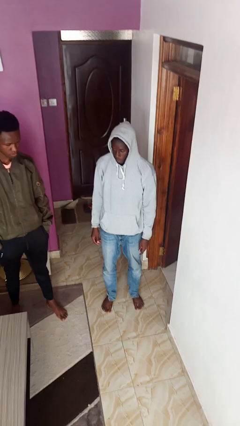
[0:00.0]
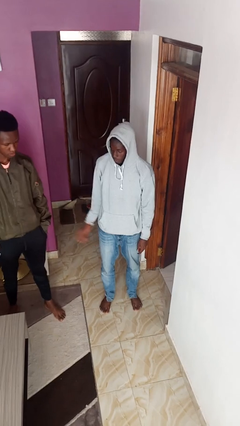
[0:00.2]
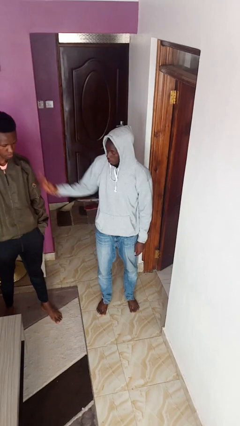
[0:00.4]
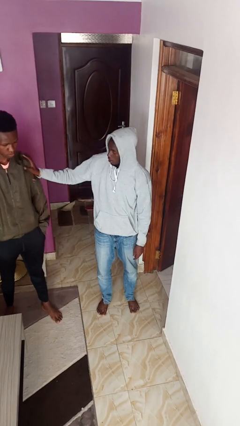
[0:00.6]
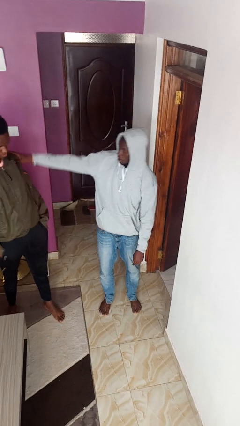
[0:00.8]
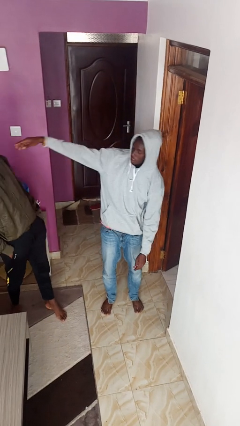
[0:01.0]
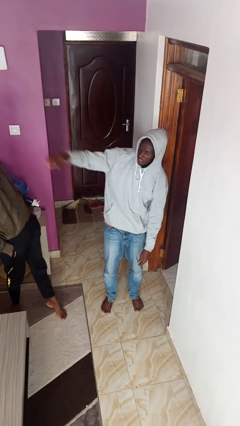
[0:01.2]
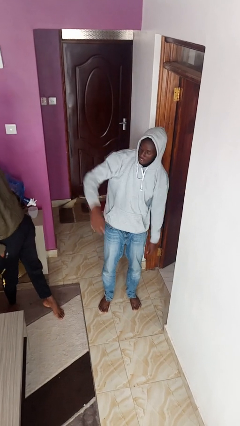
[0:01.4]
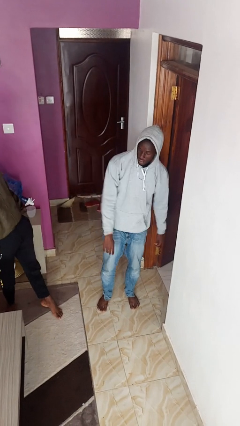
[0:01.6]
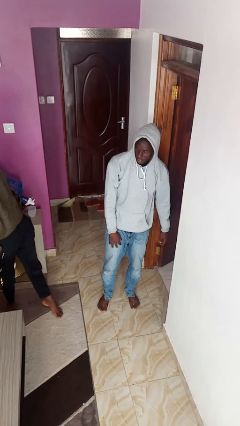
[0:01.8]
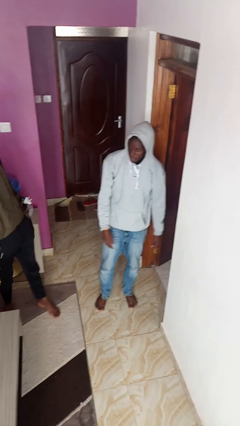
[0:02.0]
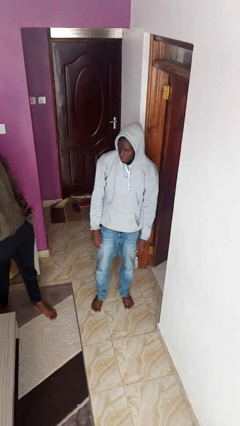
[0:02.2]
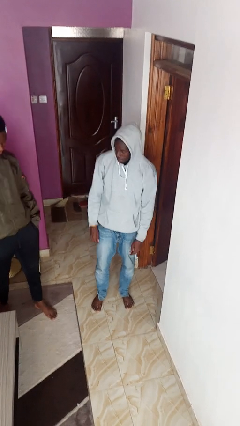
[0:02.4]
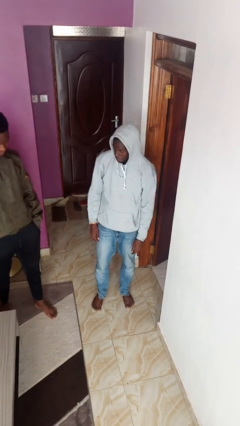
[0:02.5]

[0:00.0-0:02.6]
person shoves person

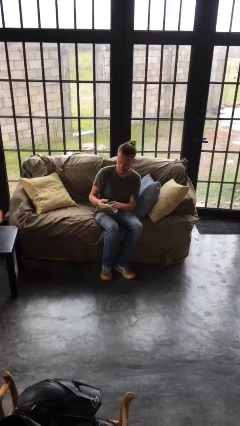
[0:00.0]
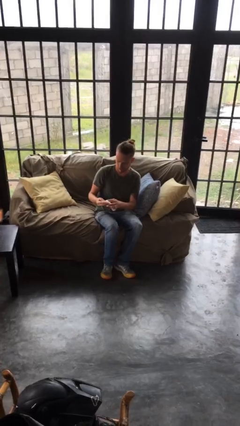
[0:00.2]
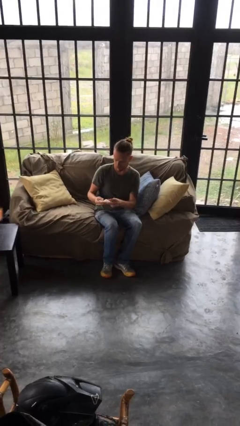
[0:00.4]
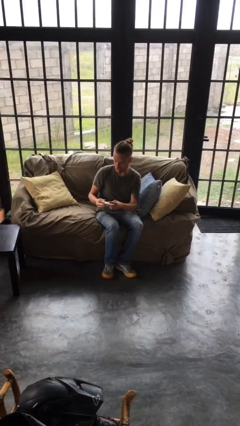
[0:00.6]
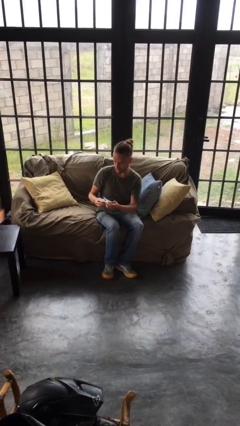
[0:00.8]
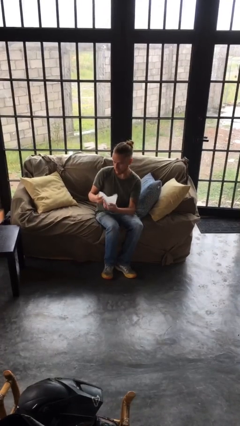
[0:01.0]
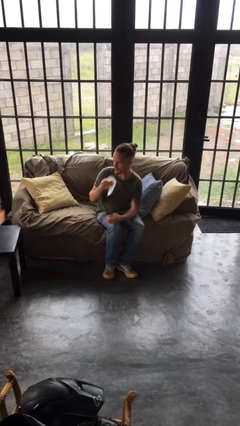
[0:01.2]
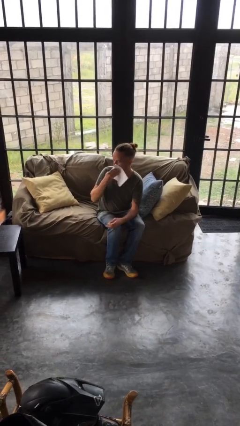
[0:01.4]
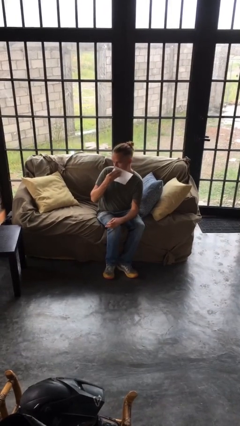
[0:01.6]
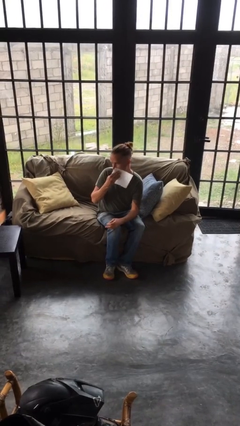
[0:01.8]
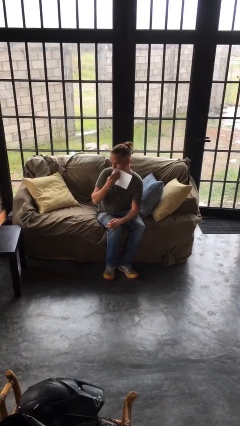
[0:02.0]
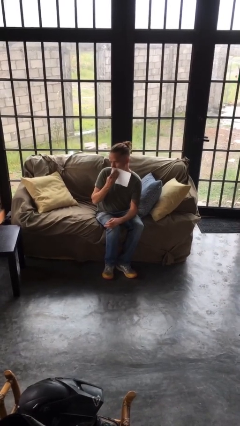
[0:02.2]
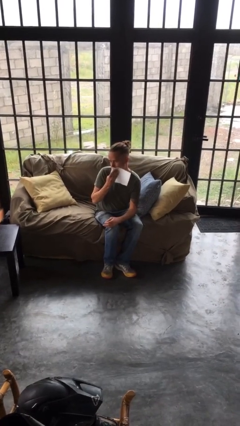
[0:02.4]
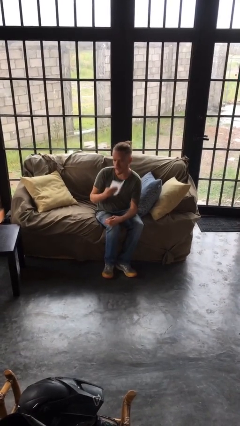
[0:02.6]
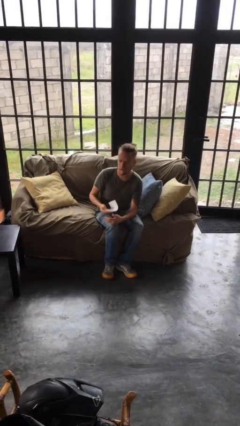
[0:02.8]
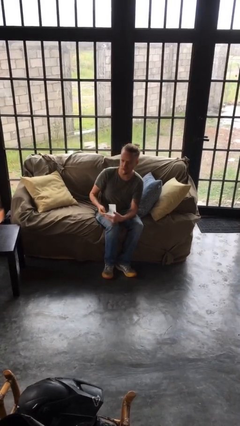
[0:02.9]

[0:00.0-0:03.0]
person wipes mouth with napkin

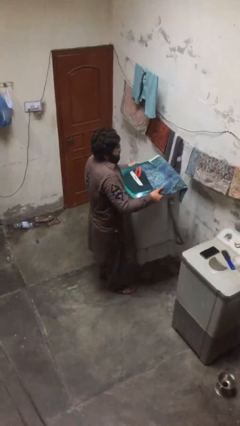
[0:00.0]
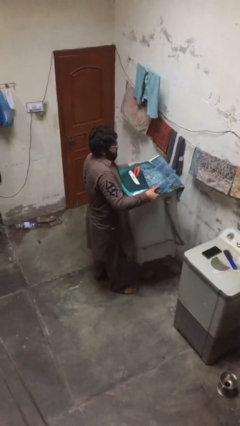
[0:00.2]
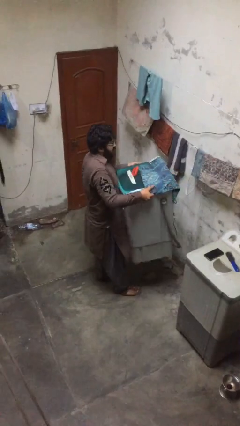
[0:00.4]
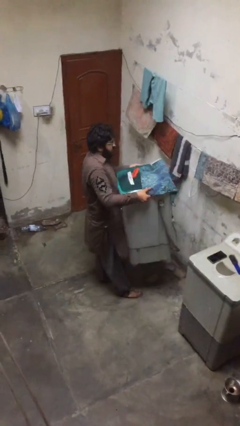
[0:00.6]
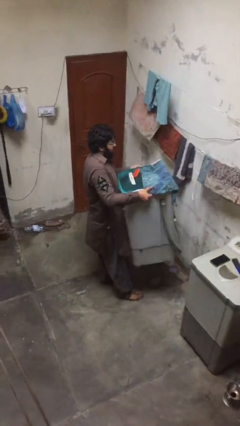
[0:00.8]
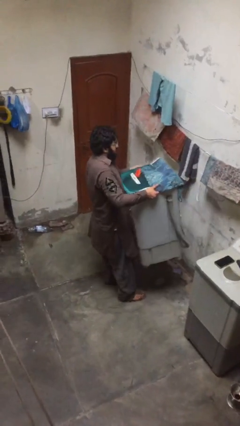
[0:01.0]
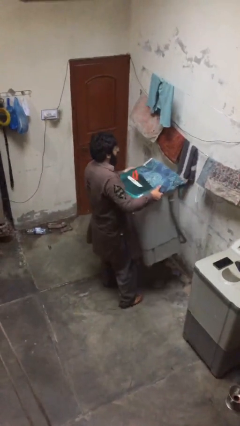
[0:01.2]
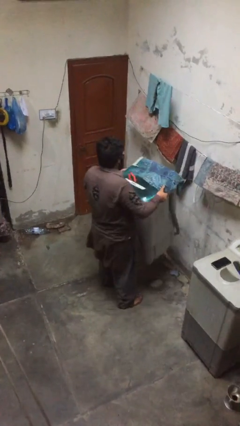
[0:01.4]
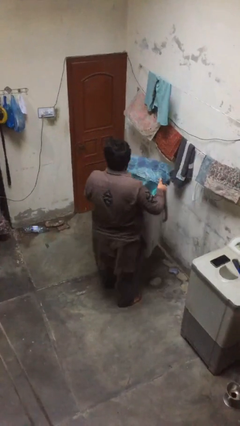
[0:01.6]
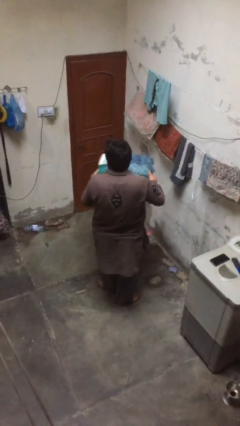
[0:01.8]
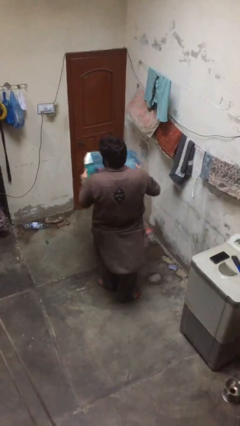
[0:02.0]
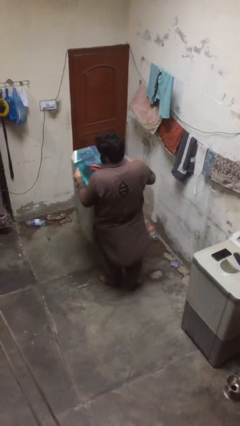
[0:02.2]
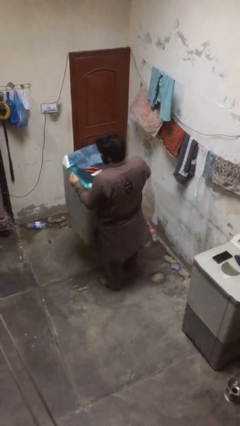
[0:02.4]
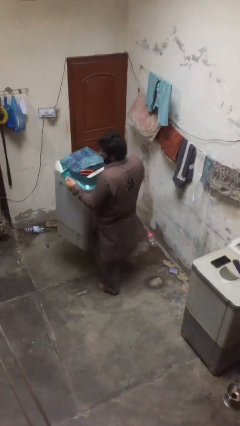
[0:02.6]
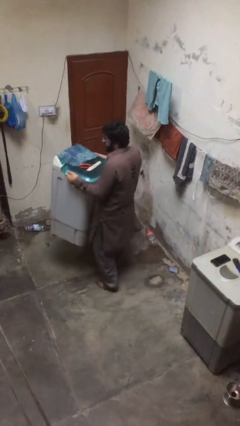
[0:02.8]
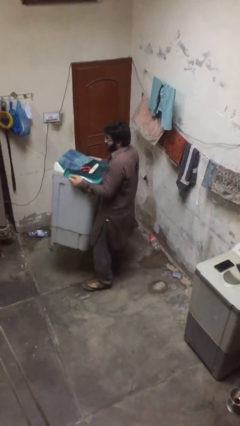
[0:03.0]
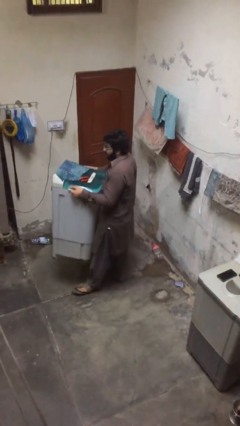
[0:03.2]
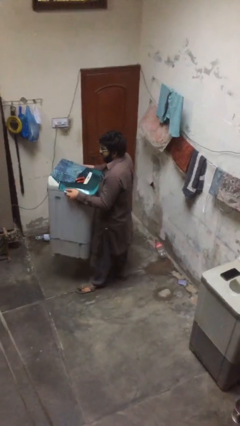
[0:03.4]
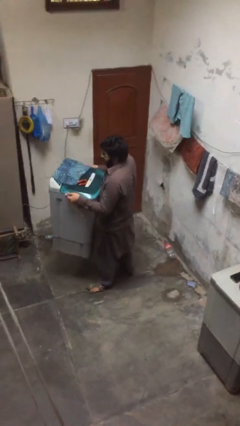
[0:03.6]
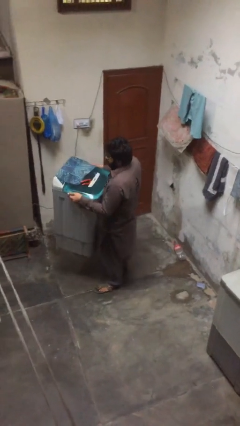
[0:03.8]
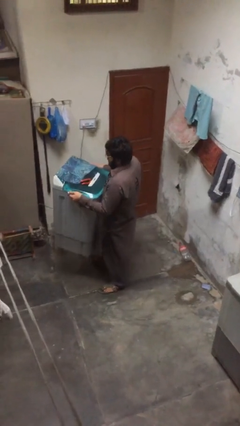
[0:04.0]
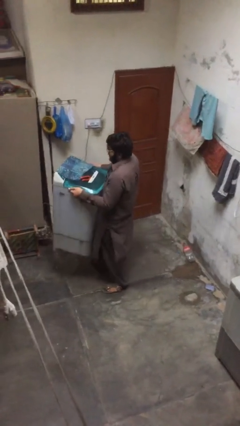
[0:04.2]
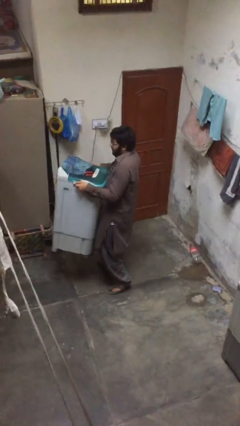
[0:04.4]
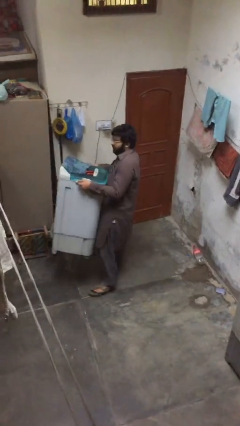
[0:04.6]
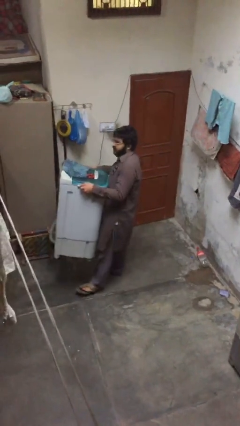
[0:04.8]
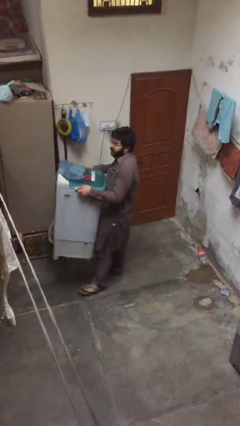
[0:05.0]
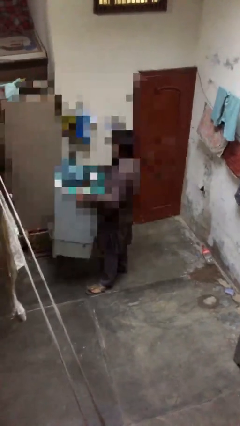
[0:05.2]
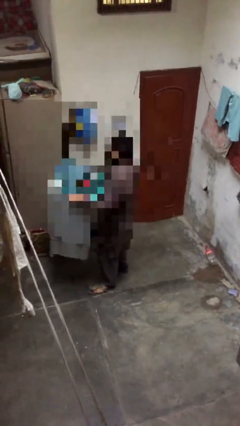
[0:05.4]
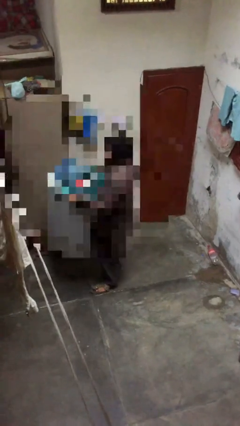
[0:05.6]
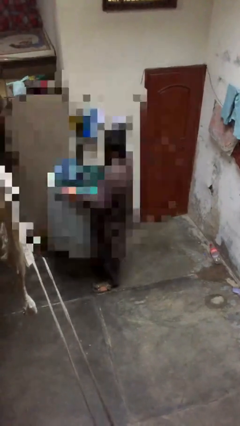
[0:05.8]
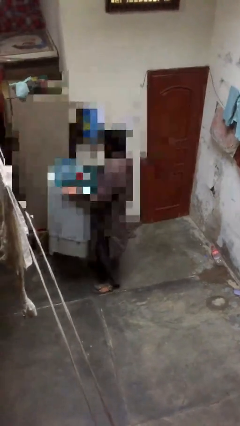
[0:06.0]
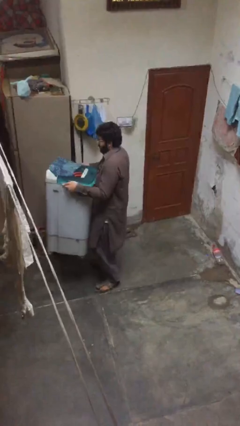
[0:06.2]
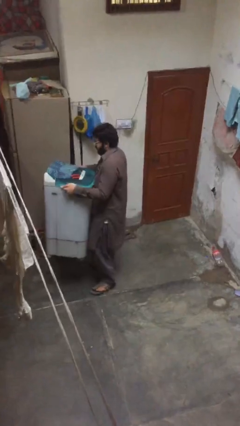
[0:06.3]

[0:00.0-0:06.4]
person carries heavy object

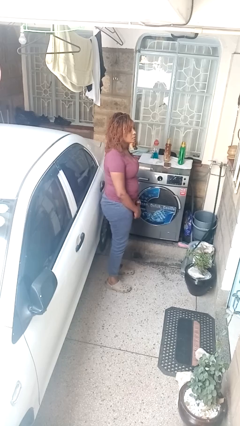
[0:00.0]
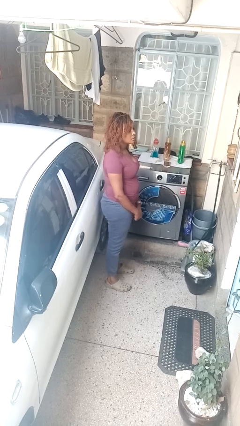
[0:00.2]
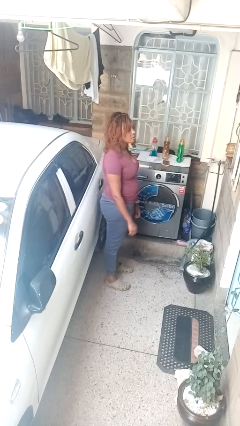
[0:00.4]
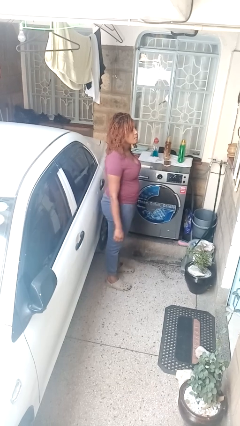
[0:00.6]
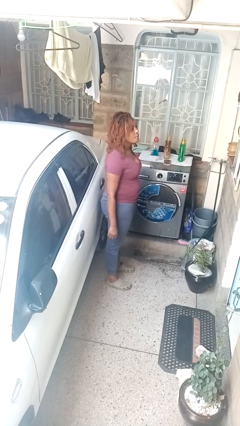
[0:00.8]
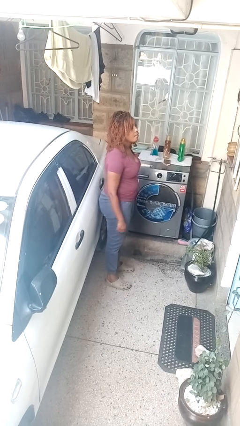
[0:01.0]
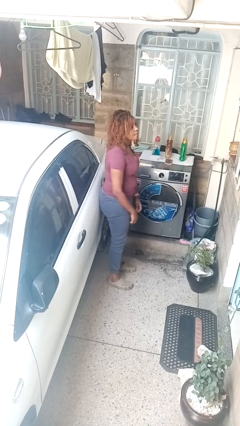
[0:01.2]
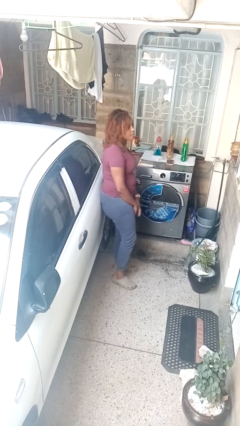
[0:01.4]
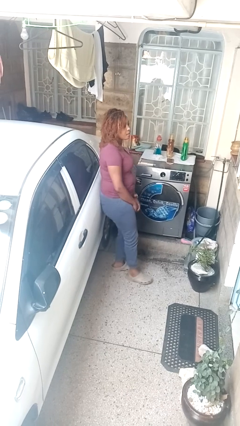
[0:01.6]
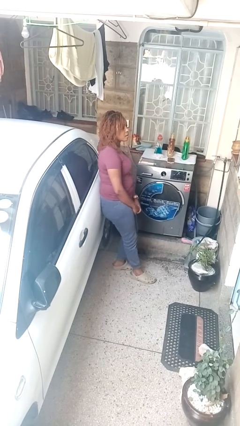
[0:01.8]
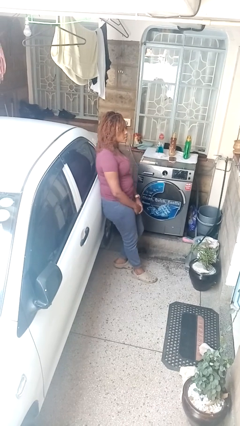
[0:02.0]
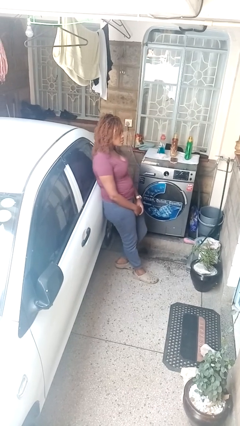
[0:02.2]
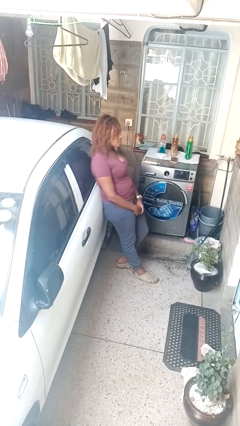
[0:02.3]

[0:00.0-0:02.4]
person leans against car

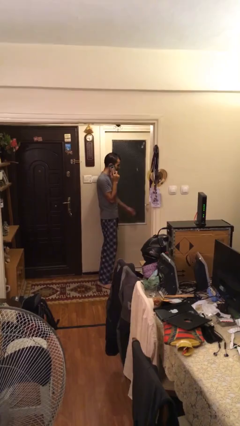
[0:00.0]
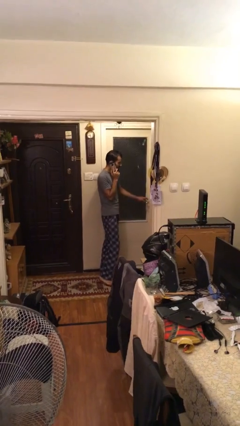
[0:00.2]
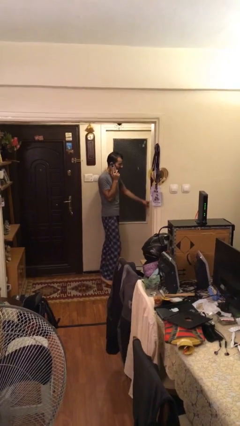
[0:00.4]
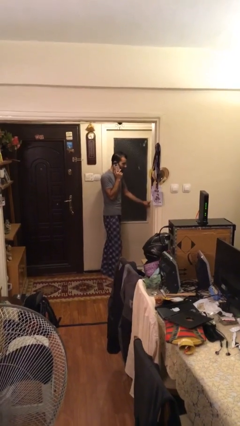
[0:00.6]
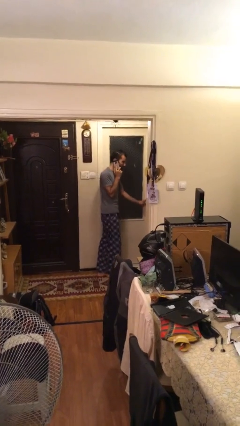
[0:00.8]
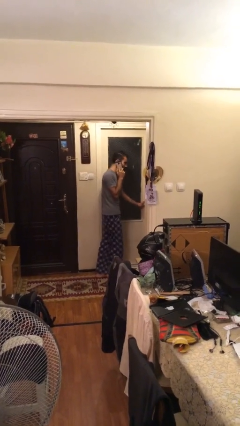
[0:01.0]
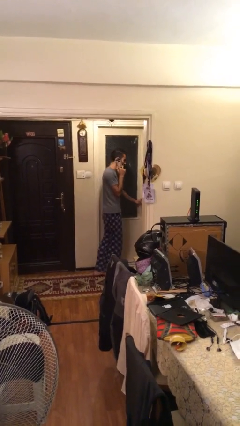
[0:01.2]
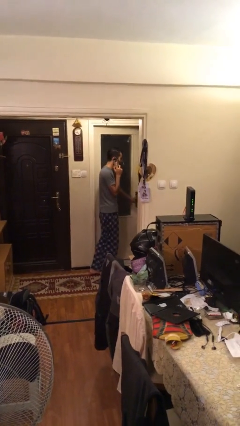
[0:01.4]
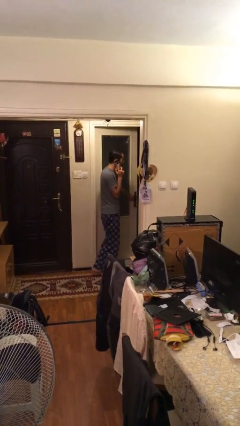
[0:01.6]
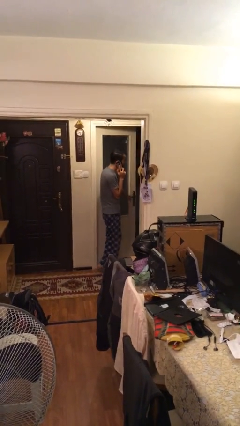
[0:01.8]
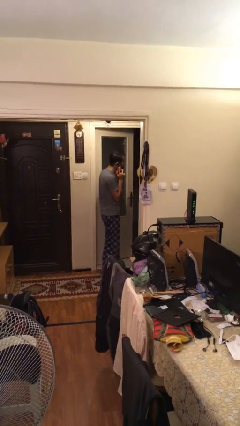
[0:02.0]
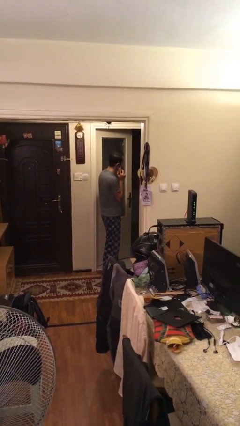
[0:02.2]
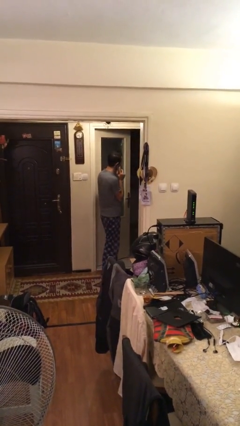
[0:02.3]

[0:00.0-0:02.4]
person opens facility door

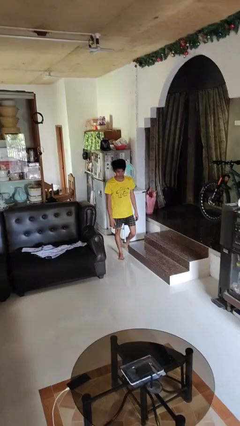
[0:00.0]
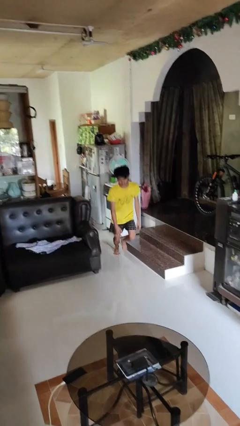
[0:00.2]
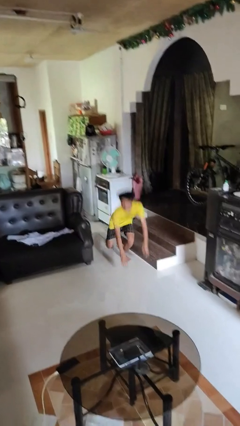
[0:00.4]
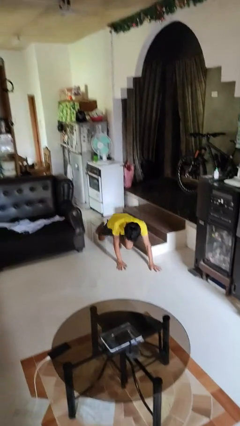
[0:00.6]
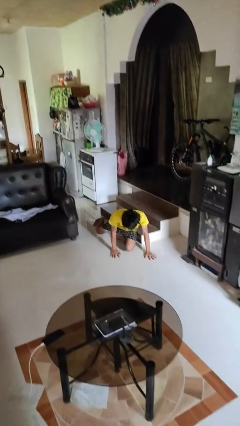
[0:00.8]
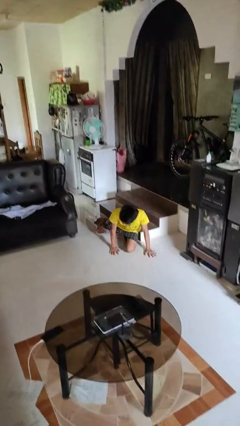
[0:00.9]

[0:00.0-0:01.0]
person trips on object on floor
